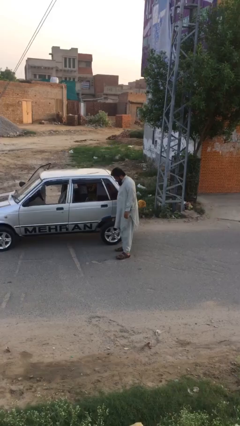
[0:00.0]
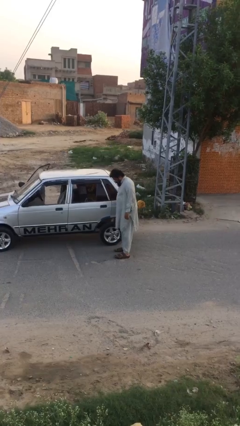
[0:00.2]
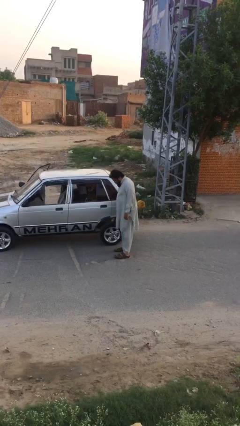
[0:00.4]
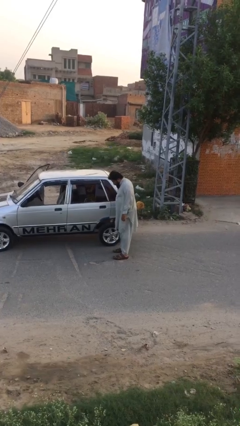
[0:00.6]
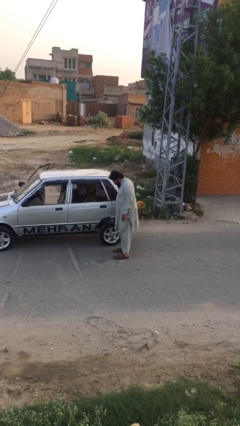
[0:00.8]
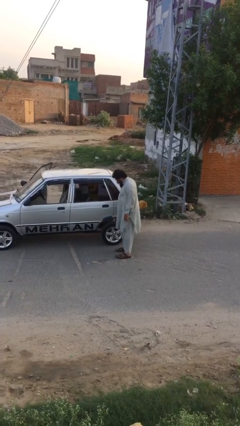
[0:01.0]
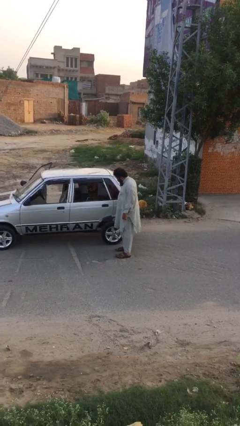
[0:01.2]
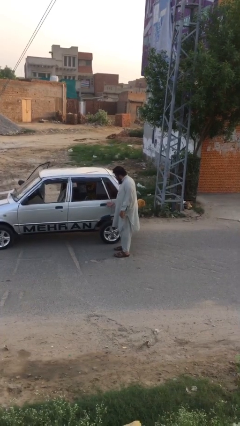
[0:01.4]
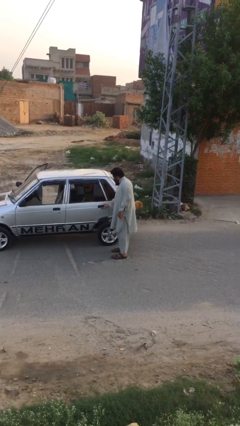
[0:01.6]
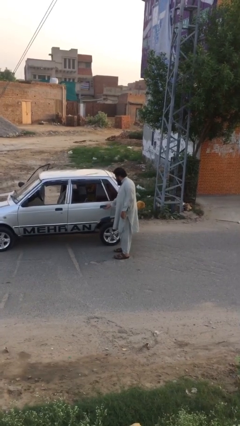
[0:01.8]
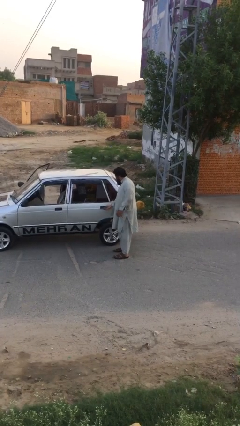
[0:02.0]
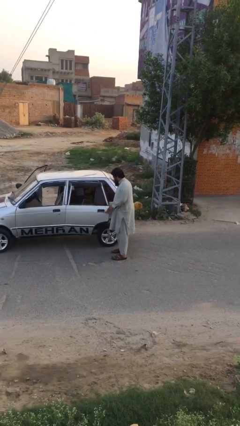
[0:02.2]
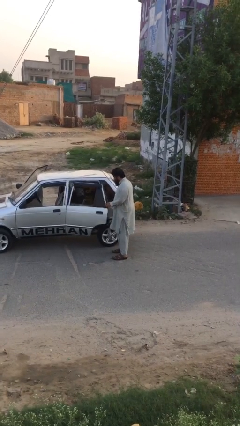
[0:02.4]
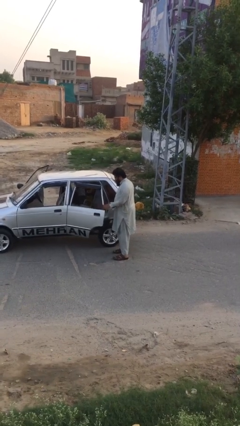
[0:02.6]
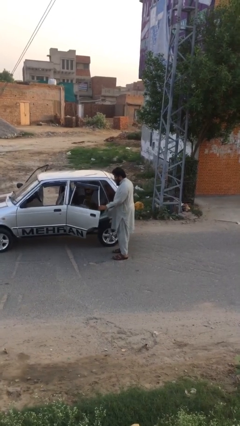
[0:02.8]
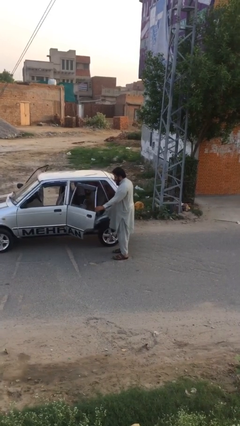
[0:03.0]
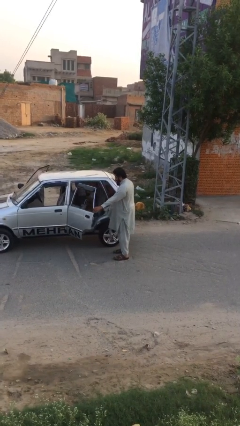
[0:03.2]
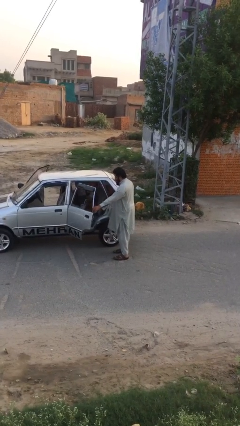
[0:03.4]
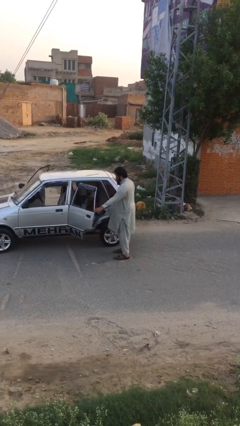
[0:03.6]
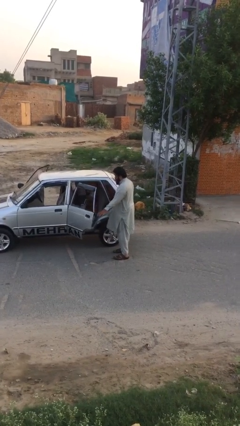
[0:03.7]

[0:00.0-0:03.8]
person opens car door

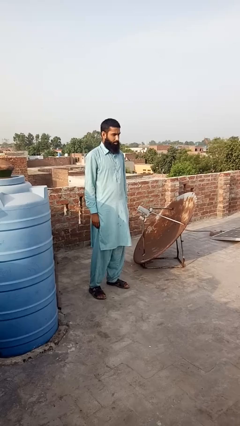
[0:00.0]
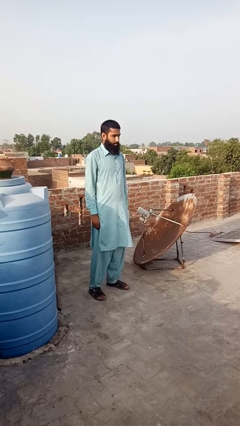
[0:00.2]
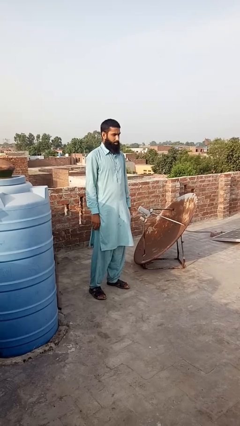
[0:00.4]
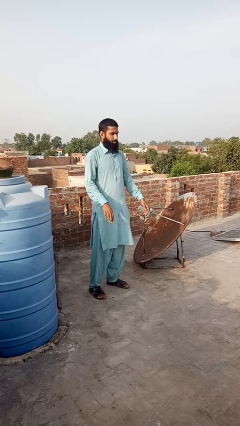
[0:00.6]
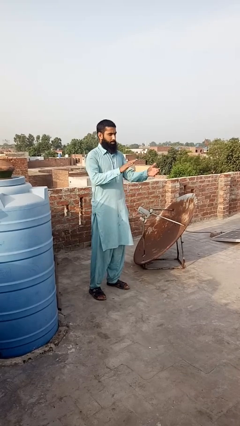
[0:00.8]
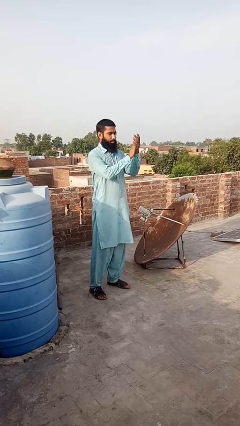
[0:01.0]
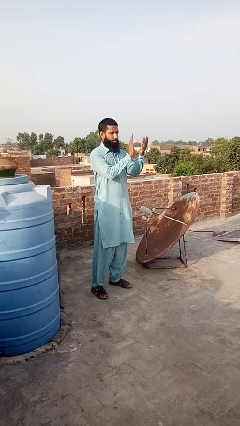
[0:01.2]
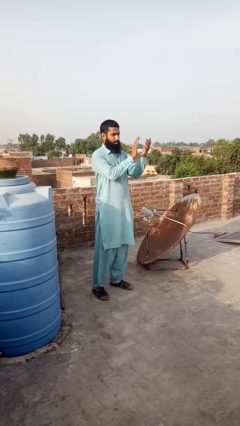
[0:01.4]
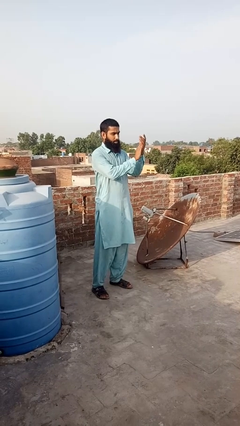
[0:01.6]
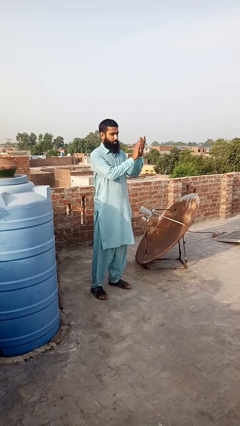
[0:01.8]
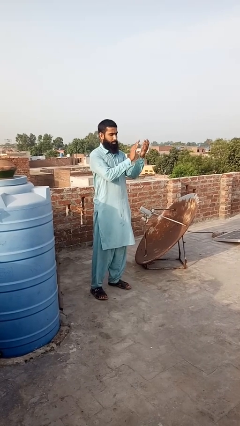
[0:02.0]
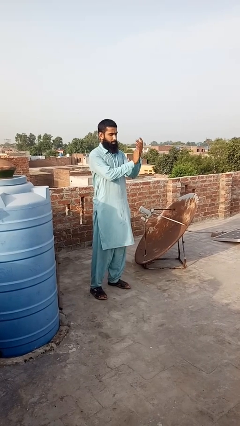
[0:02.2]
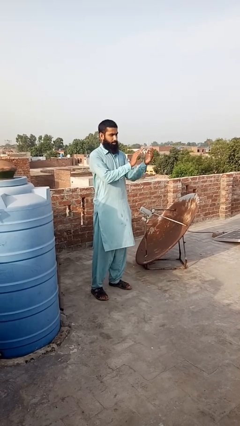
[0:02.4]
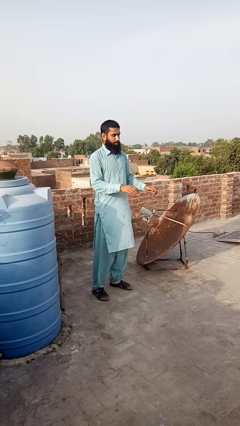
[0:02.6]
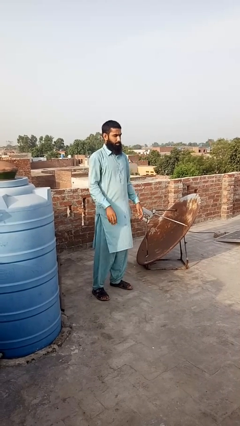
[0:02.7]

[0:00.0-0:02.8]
person claps hands

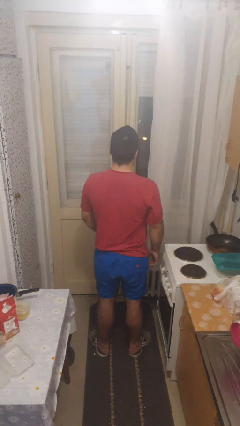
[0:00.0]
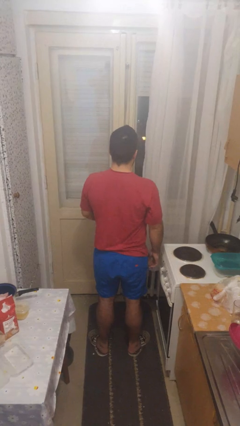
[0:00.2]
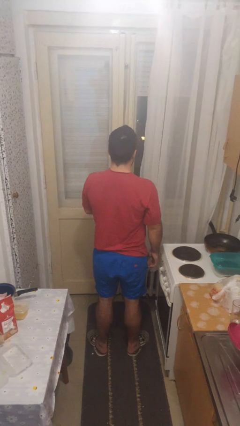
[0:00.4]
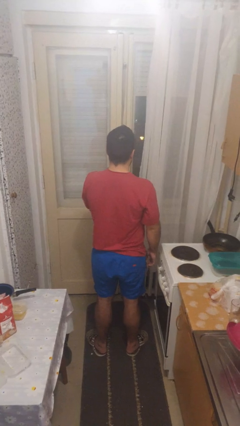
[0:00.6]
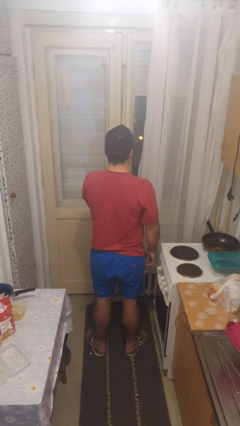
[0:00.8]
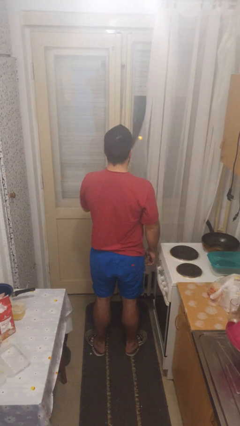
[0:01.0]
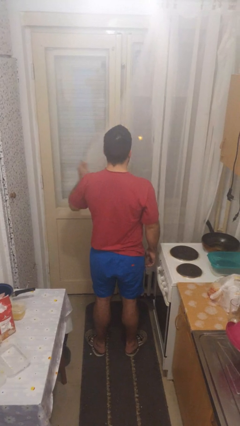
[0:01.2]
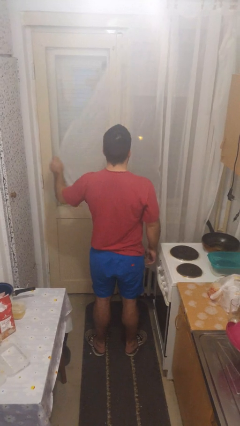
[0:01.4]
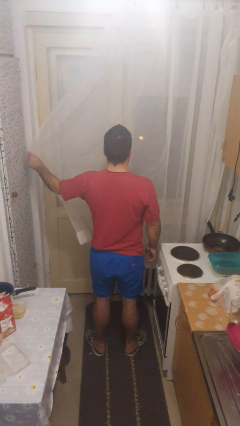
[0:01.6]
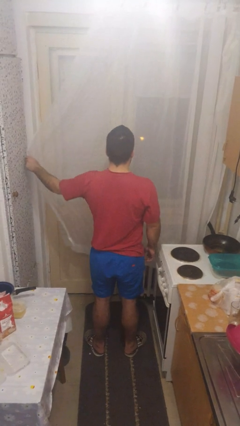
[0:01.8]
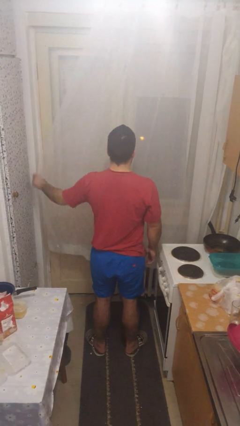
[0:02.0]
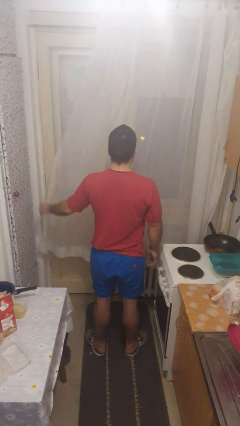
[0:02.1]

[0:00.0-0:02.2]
person closes curtains

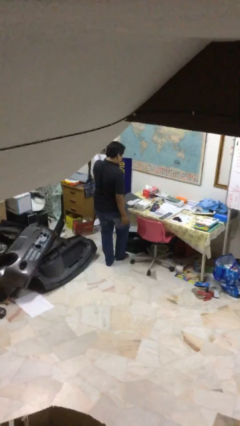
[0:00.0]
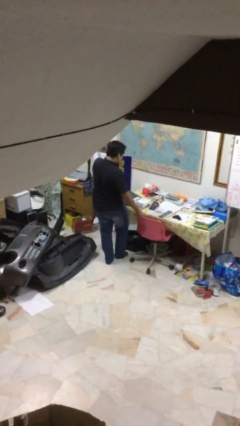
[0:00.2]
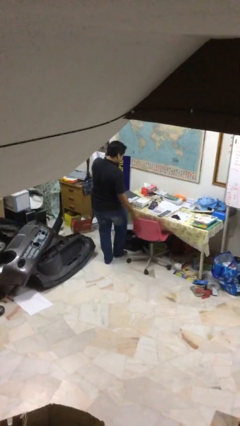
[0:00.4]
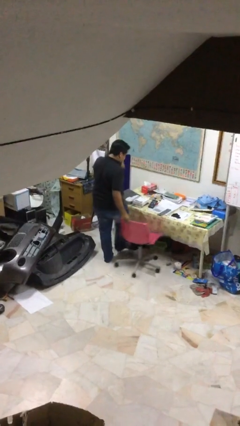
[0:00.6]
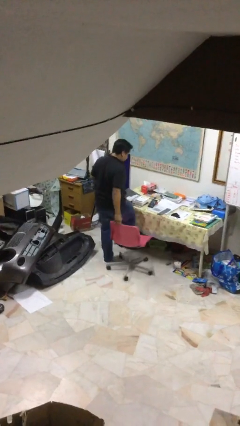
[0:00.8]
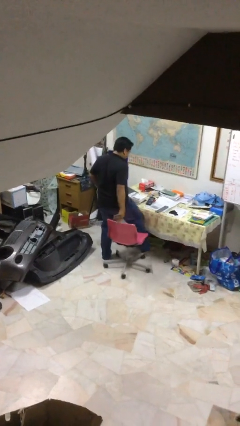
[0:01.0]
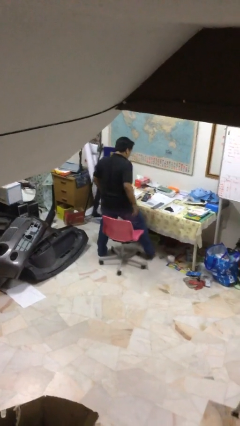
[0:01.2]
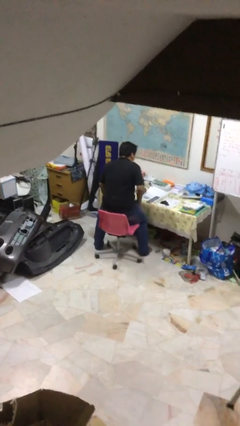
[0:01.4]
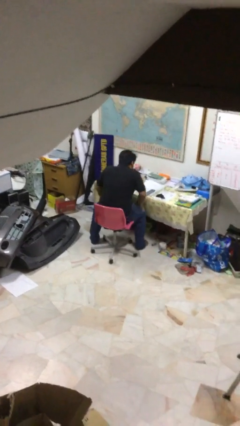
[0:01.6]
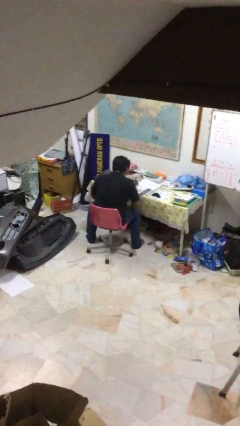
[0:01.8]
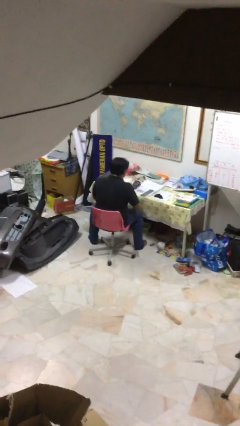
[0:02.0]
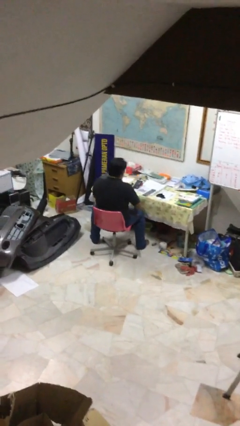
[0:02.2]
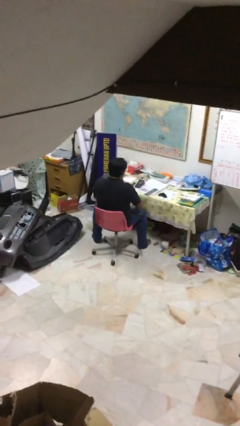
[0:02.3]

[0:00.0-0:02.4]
person sits down

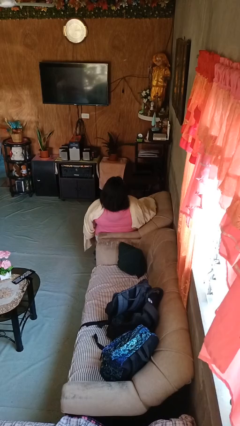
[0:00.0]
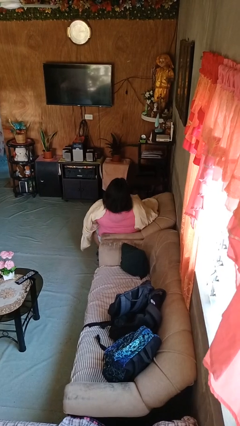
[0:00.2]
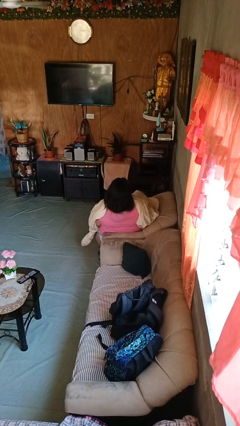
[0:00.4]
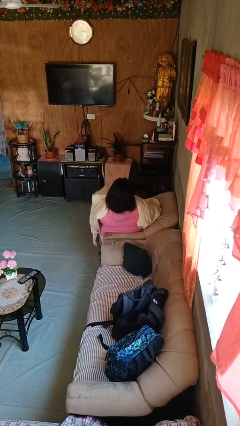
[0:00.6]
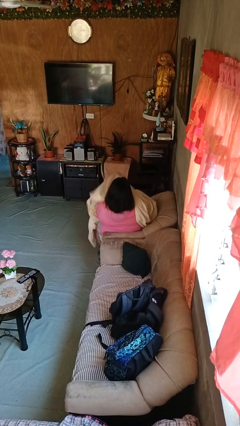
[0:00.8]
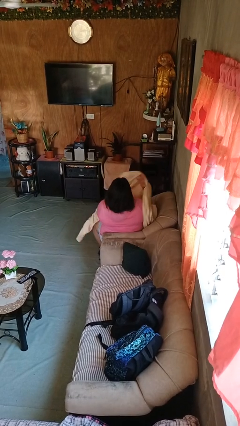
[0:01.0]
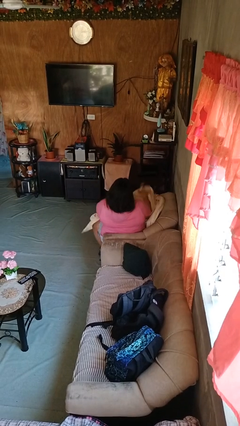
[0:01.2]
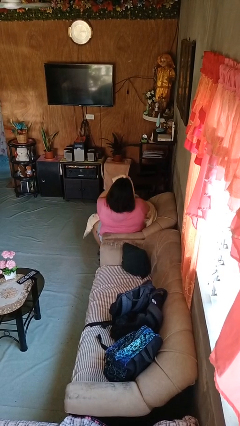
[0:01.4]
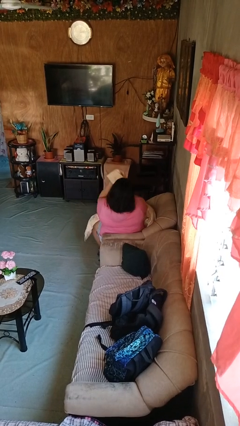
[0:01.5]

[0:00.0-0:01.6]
person uncovers with blanket

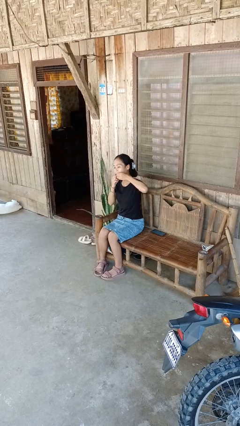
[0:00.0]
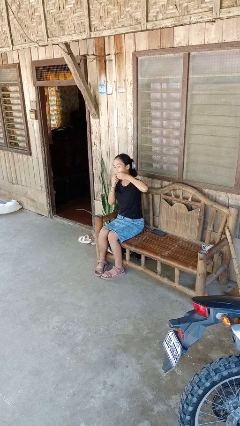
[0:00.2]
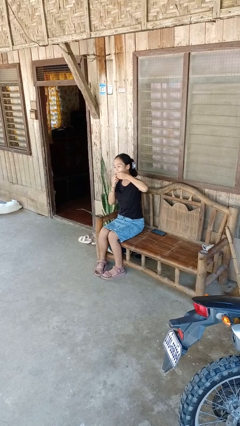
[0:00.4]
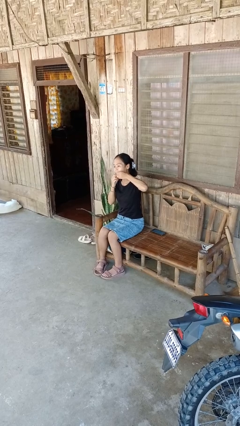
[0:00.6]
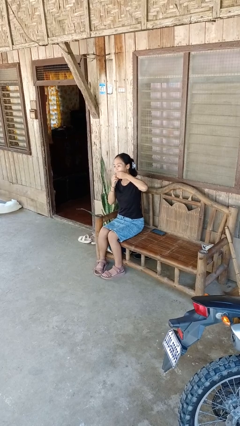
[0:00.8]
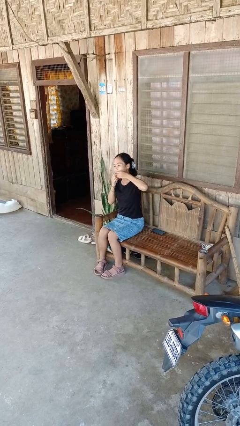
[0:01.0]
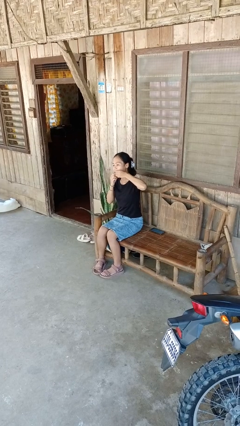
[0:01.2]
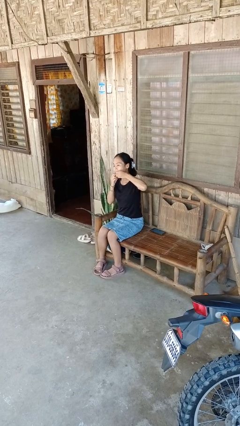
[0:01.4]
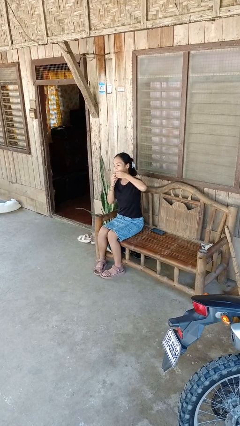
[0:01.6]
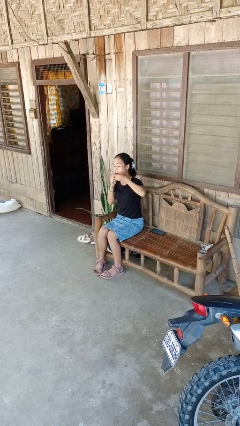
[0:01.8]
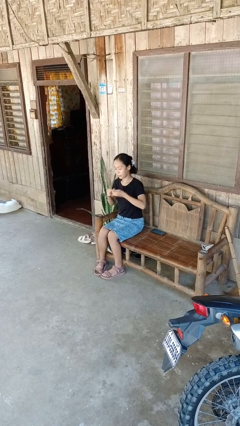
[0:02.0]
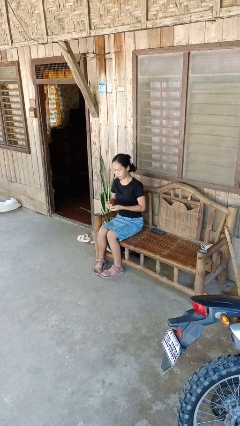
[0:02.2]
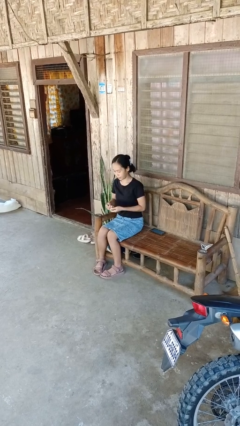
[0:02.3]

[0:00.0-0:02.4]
person flosses

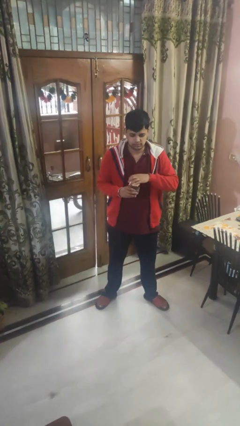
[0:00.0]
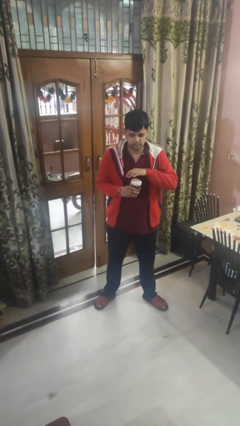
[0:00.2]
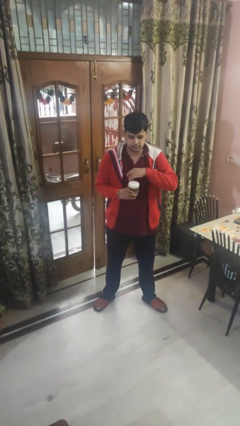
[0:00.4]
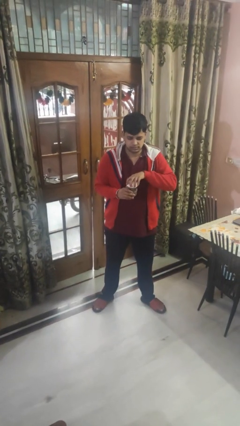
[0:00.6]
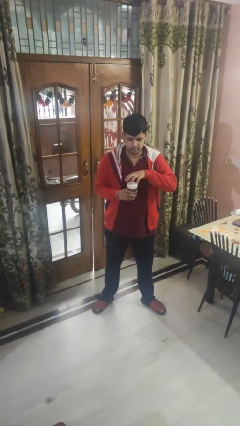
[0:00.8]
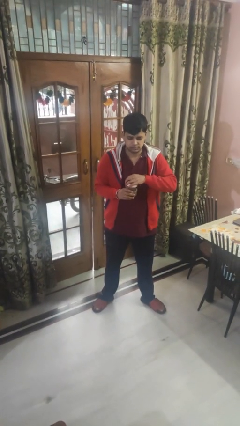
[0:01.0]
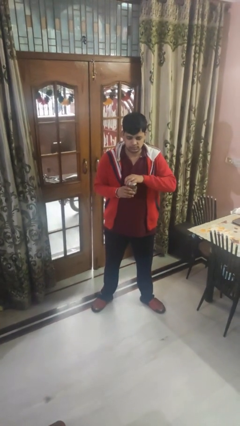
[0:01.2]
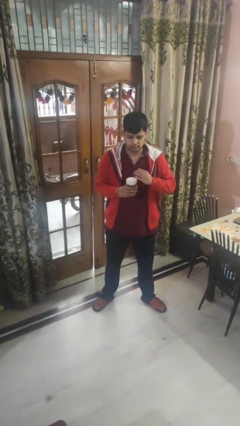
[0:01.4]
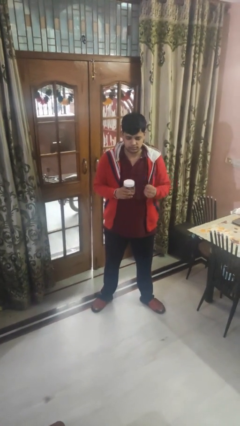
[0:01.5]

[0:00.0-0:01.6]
person closes jar
